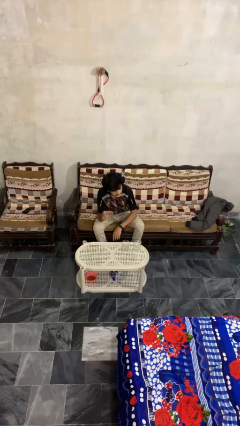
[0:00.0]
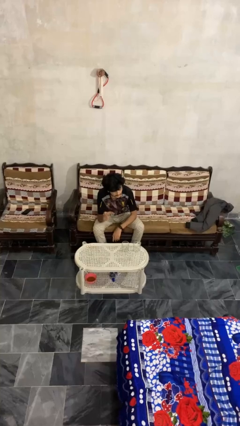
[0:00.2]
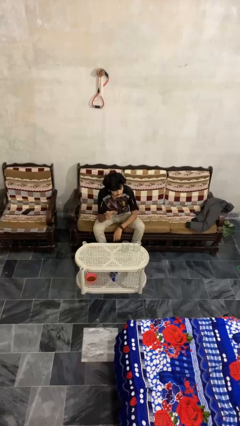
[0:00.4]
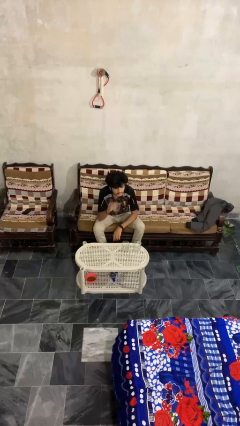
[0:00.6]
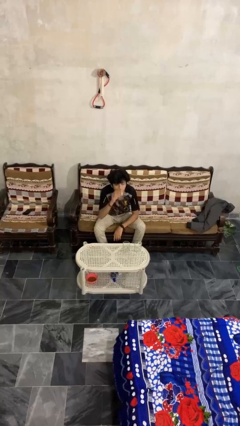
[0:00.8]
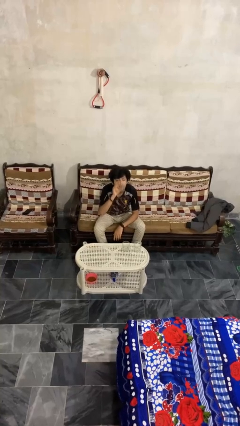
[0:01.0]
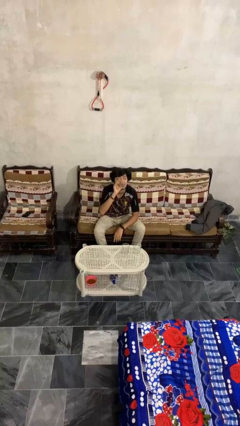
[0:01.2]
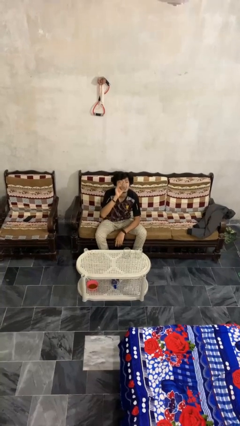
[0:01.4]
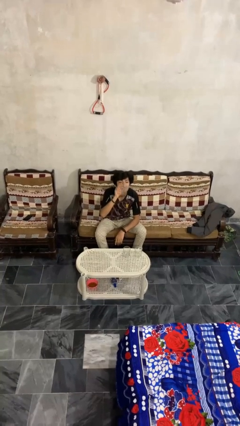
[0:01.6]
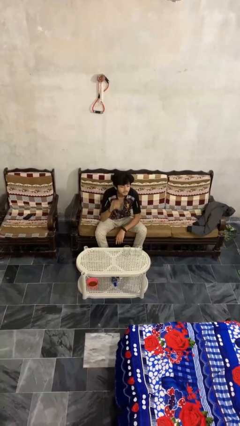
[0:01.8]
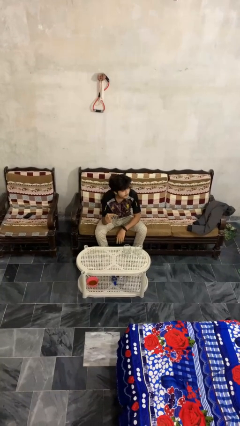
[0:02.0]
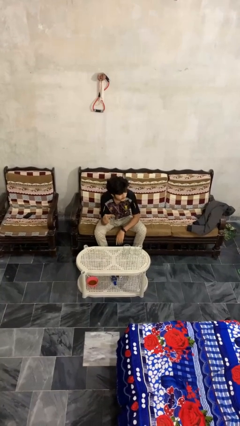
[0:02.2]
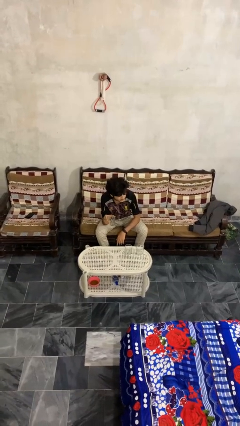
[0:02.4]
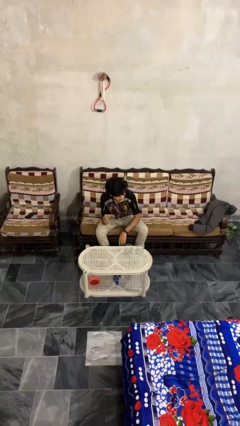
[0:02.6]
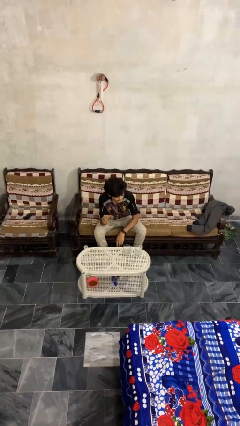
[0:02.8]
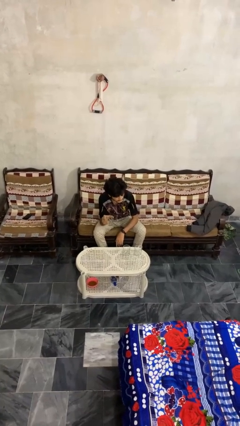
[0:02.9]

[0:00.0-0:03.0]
person drinks from shotglass

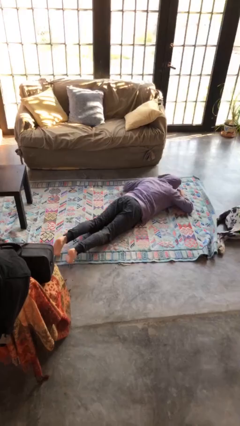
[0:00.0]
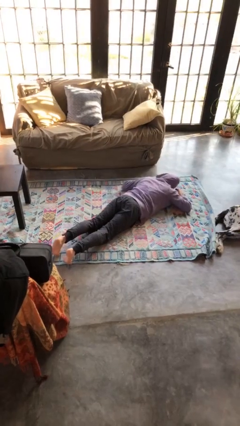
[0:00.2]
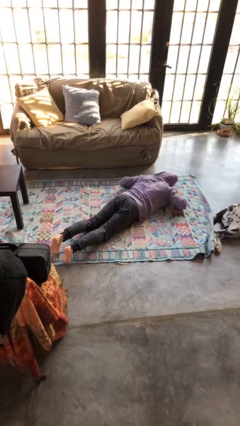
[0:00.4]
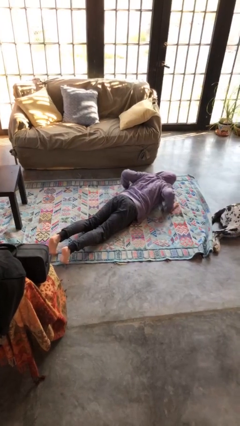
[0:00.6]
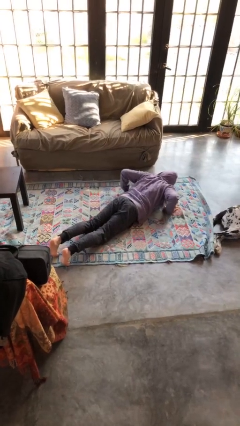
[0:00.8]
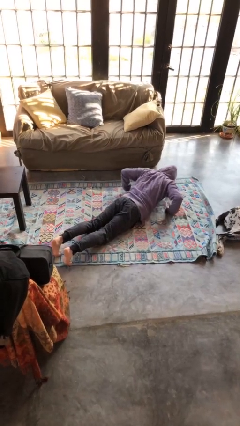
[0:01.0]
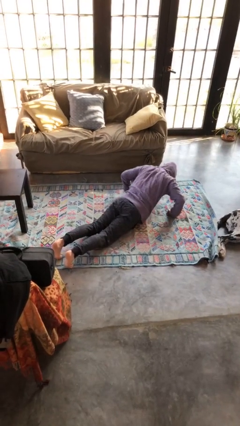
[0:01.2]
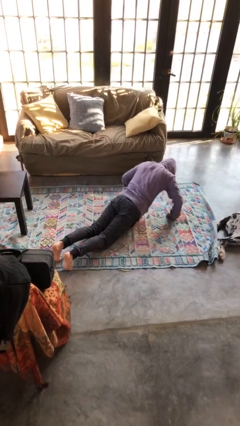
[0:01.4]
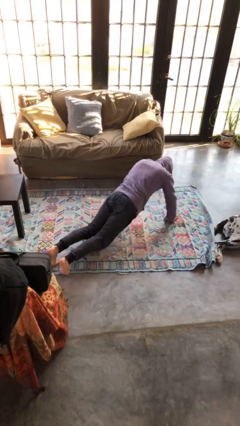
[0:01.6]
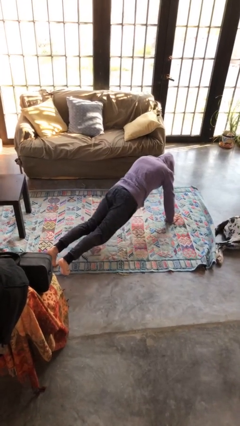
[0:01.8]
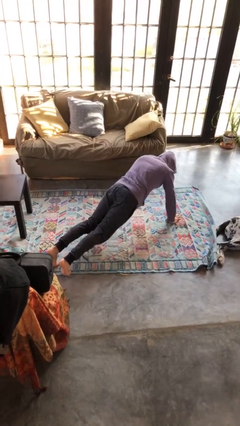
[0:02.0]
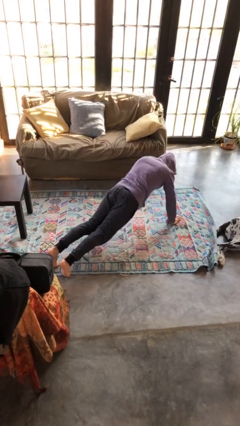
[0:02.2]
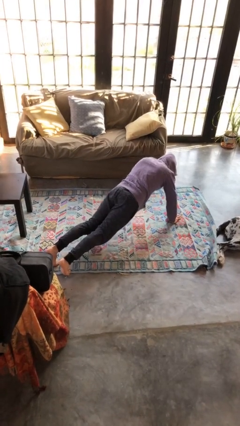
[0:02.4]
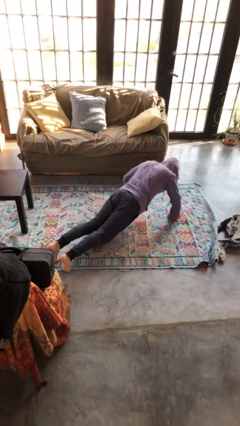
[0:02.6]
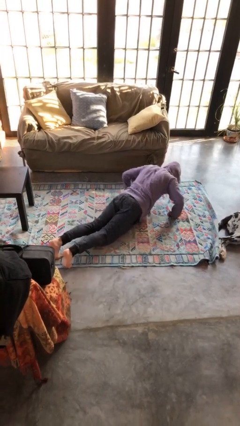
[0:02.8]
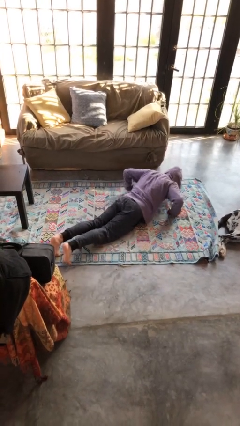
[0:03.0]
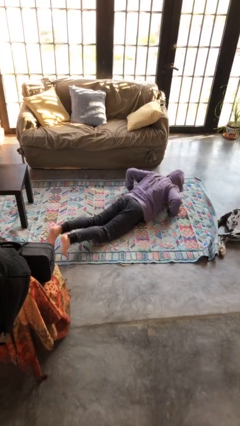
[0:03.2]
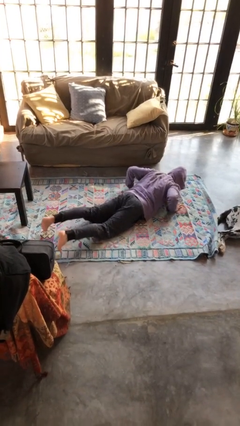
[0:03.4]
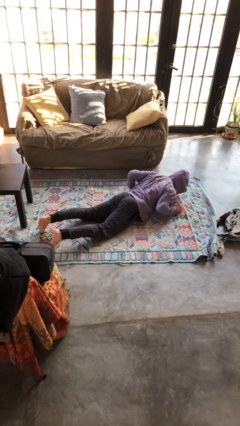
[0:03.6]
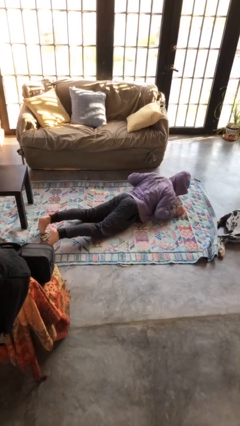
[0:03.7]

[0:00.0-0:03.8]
person exercises with pushup

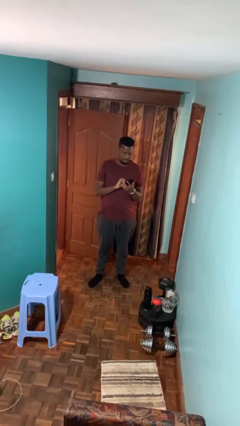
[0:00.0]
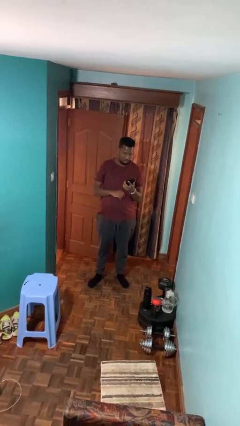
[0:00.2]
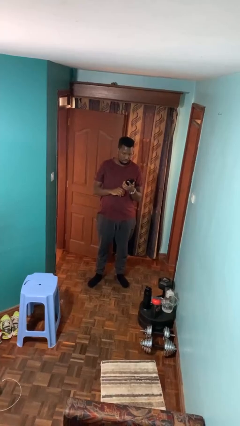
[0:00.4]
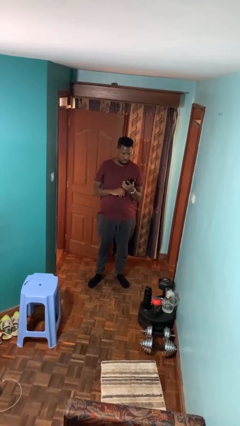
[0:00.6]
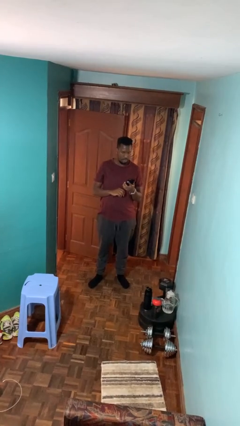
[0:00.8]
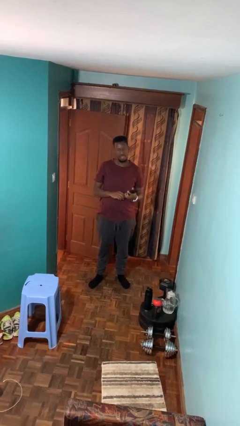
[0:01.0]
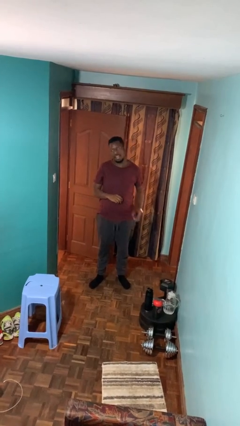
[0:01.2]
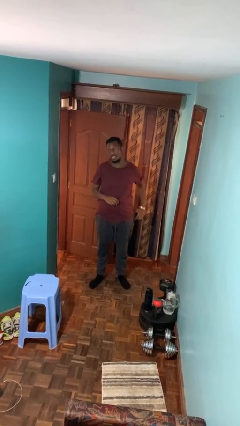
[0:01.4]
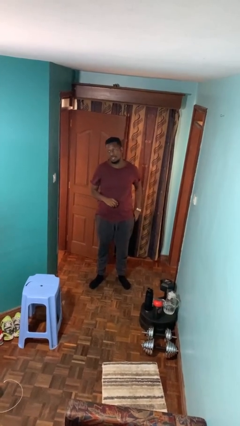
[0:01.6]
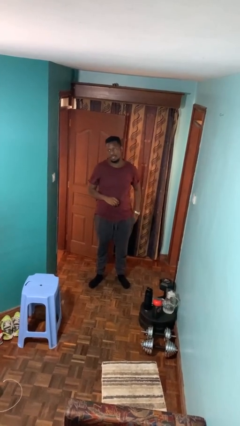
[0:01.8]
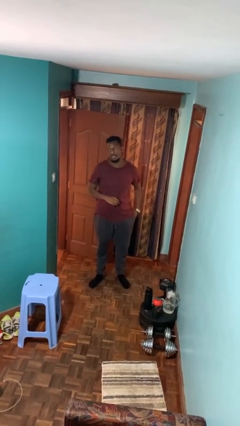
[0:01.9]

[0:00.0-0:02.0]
person puts phone into pocket

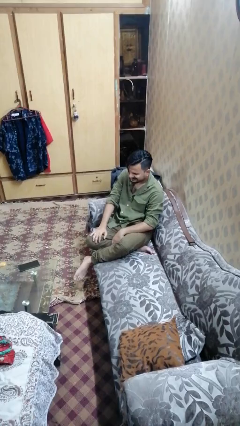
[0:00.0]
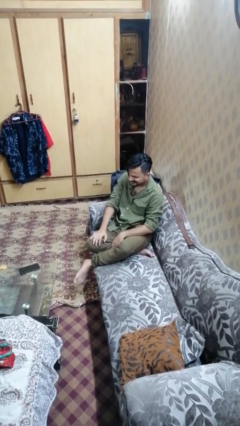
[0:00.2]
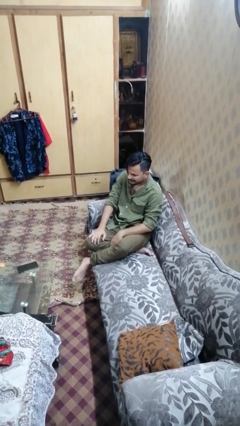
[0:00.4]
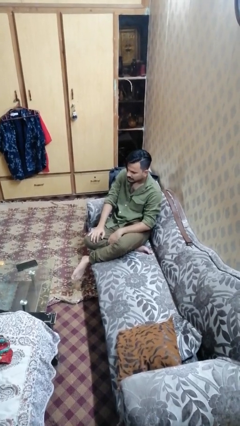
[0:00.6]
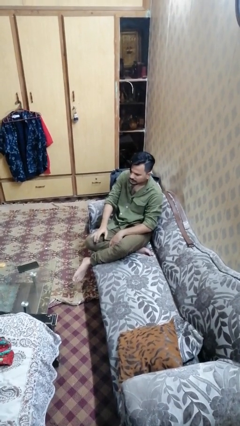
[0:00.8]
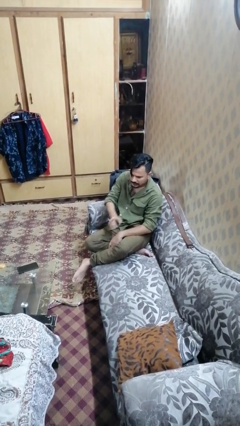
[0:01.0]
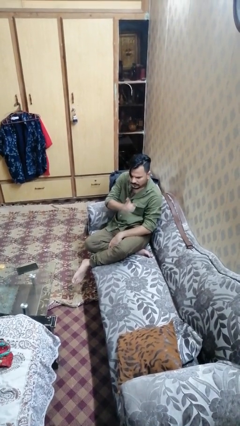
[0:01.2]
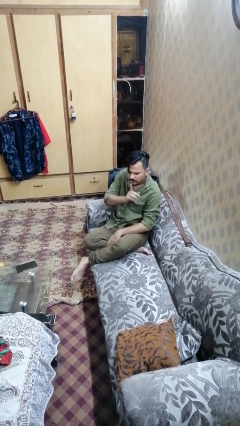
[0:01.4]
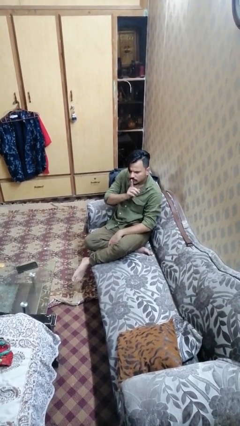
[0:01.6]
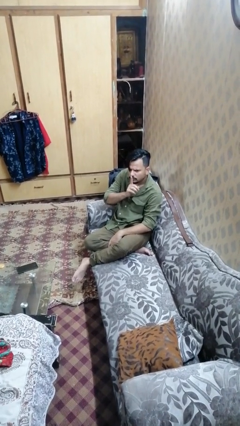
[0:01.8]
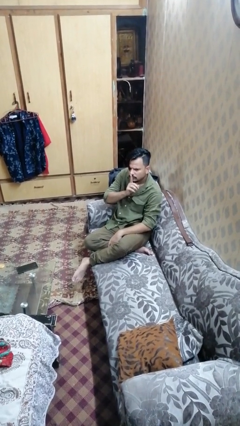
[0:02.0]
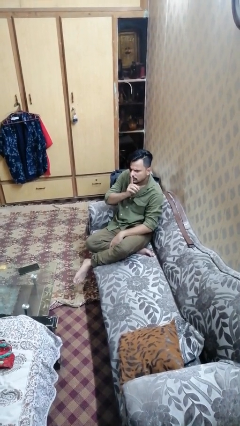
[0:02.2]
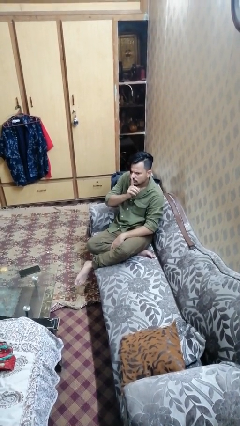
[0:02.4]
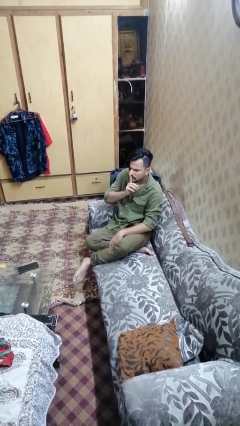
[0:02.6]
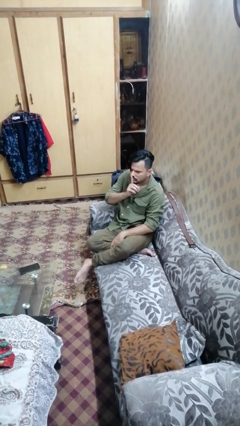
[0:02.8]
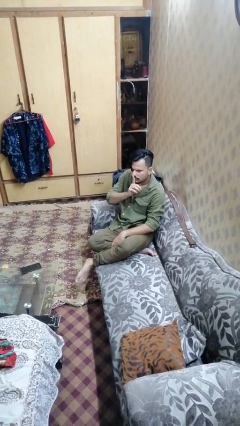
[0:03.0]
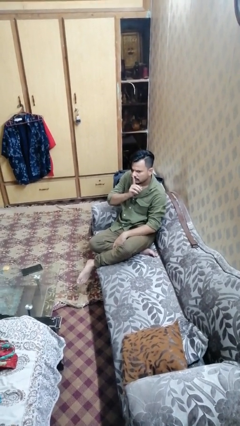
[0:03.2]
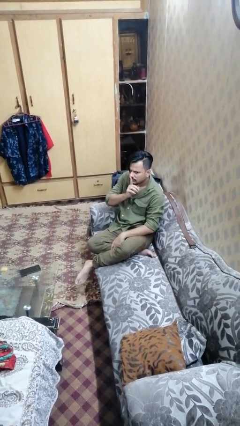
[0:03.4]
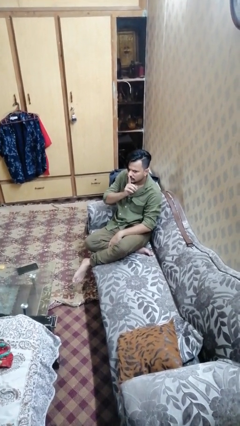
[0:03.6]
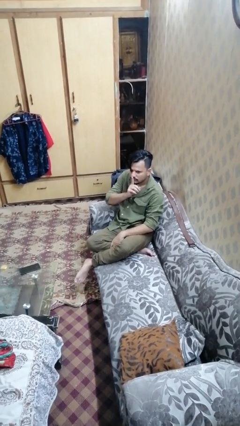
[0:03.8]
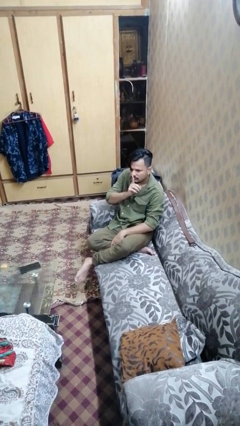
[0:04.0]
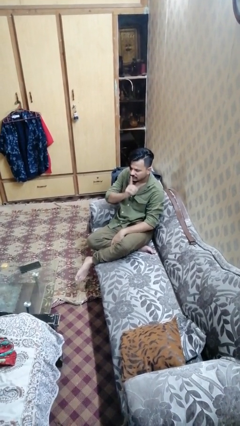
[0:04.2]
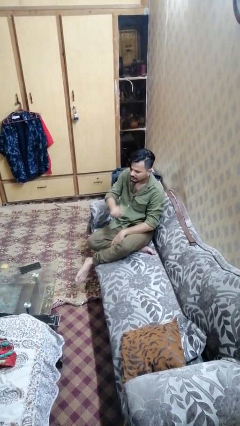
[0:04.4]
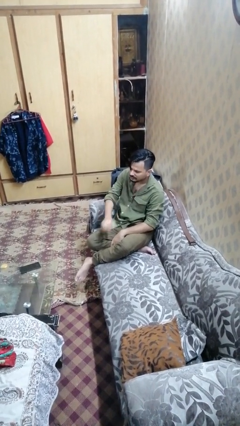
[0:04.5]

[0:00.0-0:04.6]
person gestures be quiet

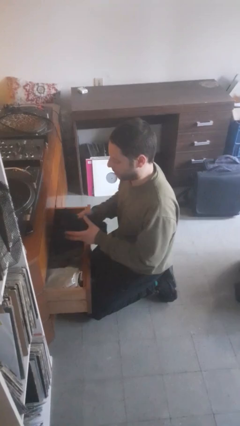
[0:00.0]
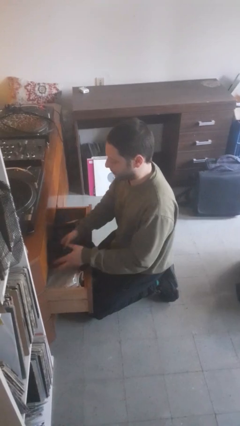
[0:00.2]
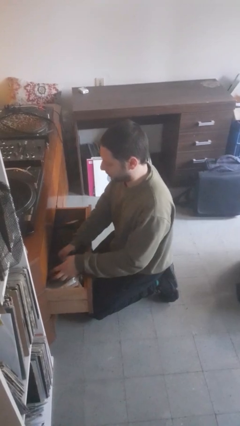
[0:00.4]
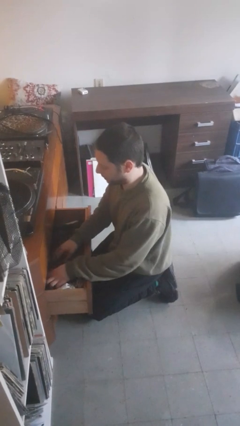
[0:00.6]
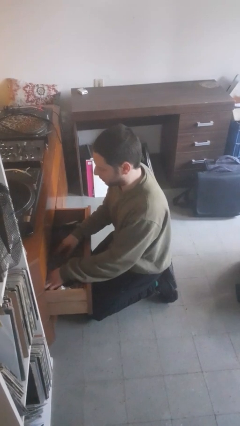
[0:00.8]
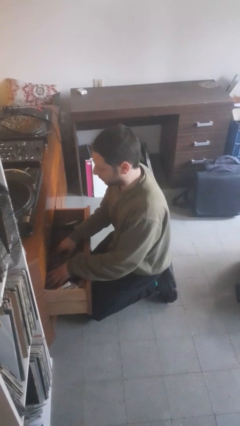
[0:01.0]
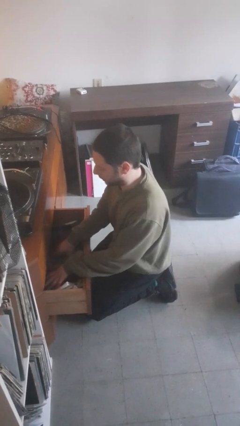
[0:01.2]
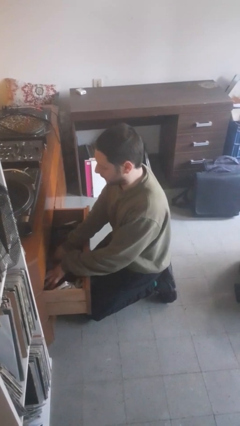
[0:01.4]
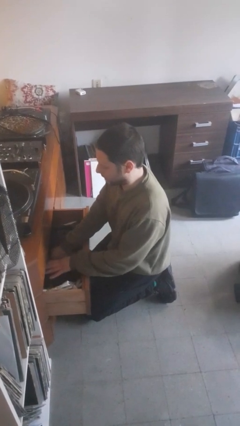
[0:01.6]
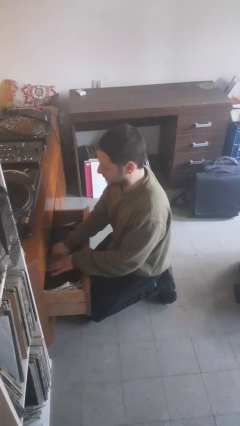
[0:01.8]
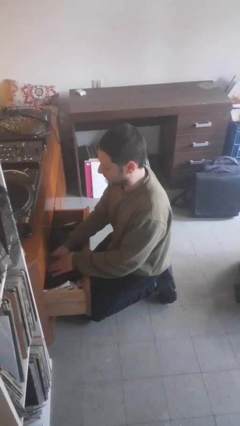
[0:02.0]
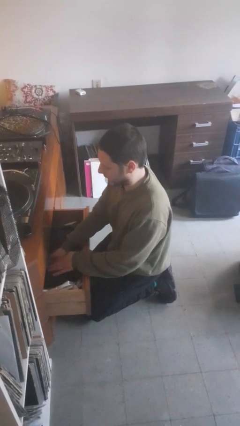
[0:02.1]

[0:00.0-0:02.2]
person puts clothes into dresser

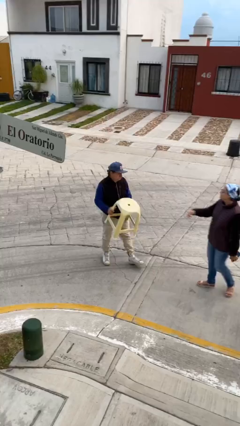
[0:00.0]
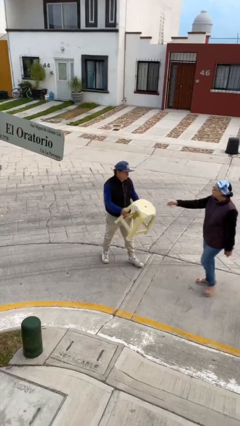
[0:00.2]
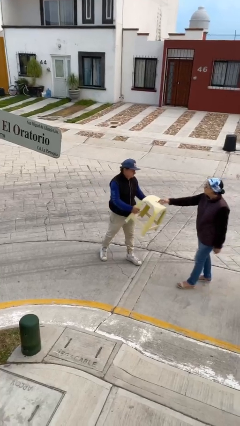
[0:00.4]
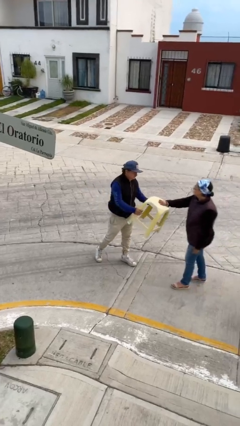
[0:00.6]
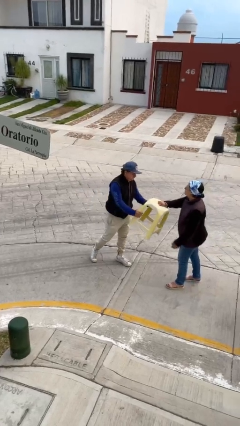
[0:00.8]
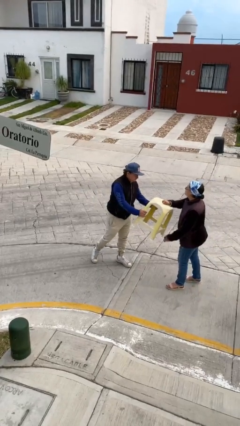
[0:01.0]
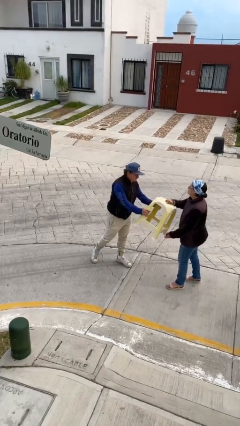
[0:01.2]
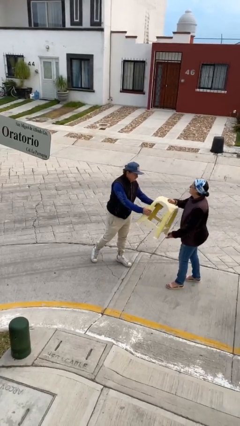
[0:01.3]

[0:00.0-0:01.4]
person transfers object to person

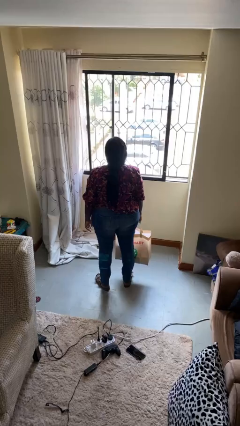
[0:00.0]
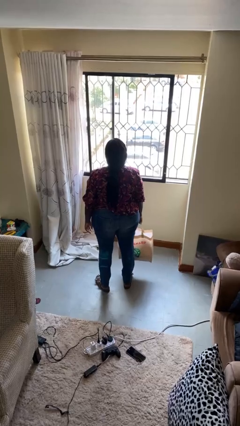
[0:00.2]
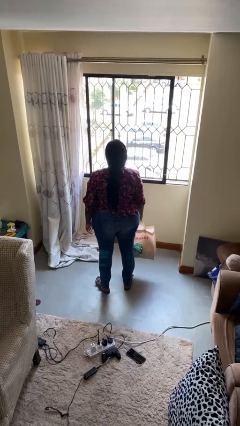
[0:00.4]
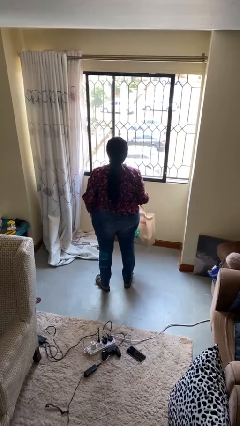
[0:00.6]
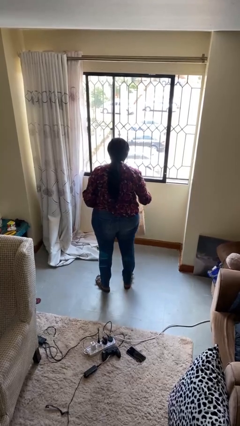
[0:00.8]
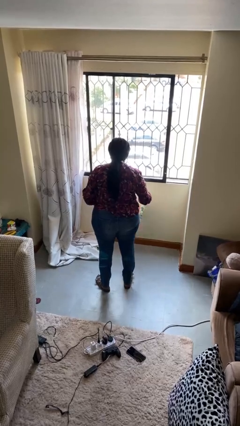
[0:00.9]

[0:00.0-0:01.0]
person takes object from bag
